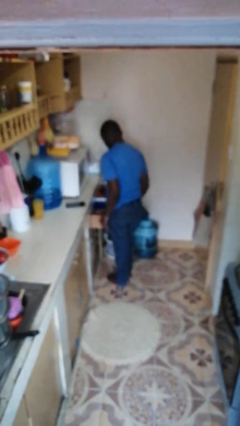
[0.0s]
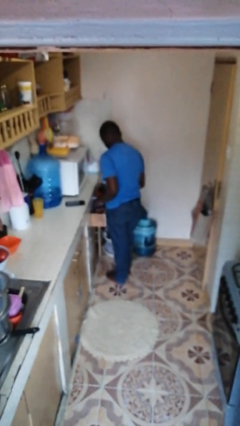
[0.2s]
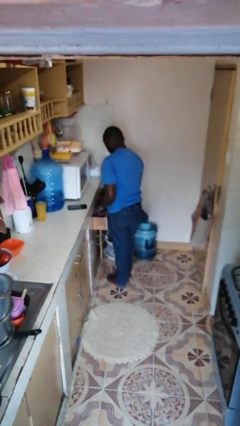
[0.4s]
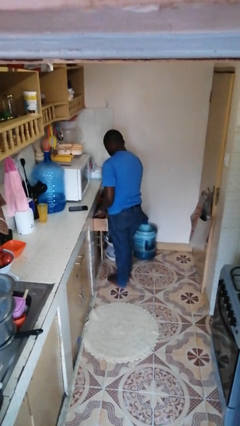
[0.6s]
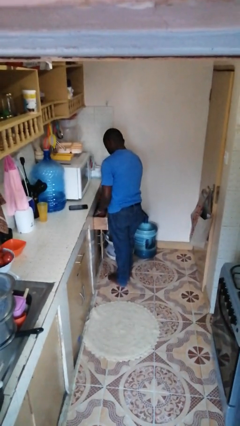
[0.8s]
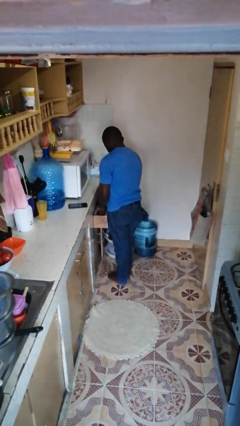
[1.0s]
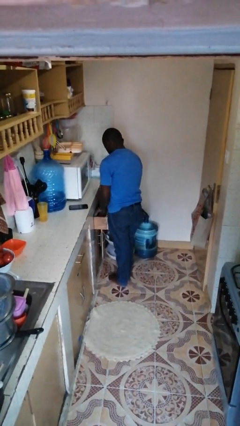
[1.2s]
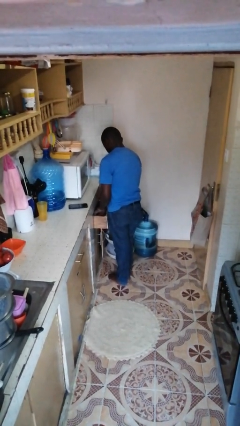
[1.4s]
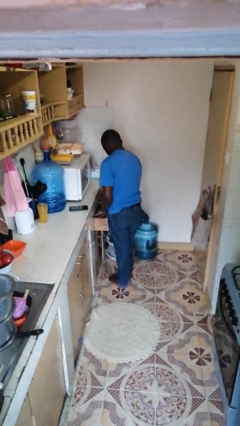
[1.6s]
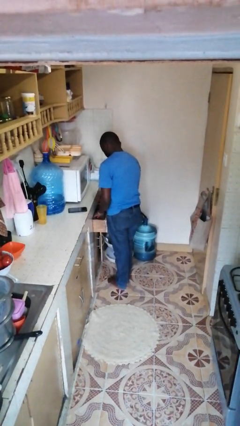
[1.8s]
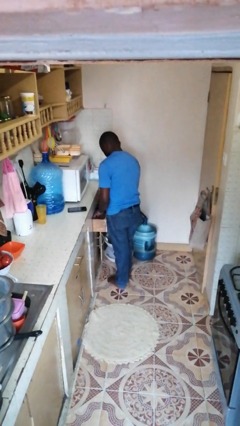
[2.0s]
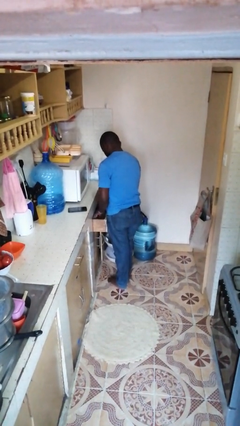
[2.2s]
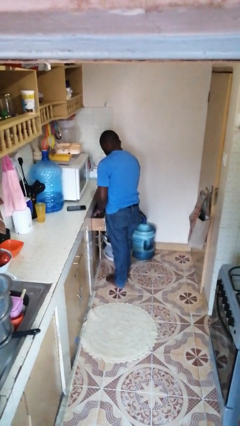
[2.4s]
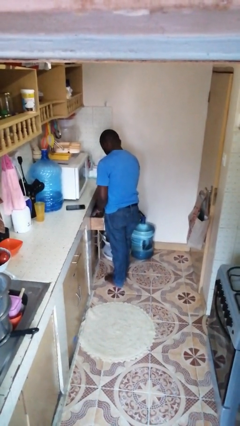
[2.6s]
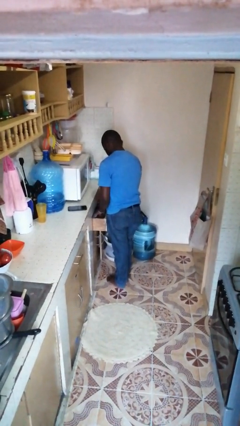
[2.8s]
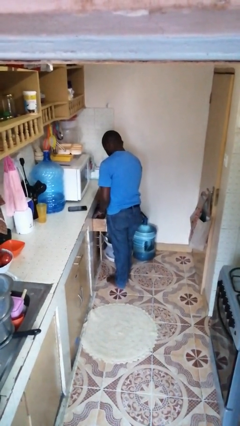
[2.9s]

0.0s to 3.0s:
person searches in kitchen drawer

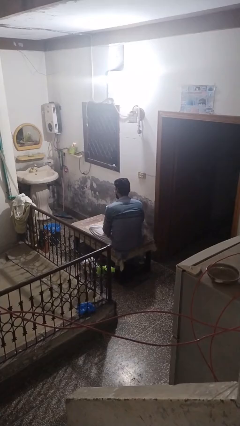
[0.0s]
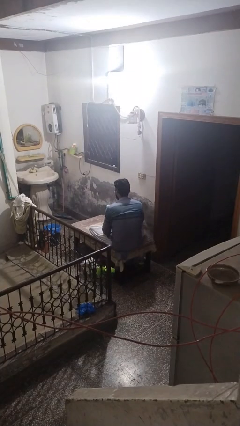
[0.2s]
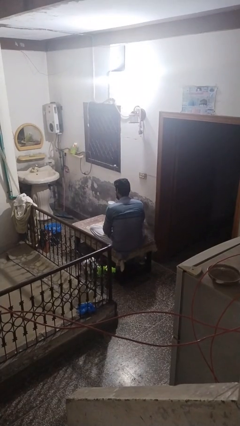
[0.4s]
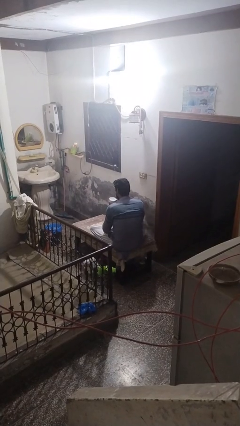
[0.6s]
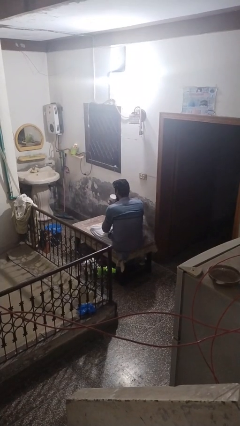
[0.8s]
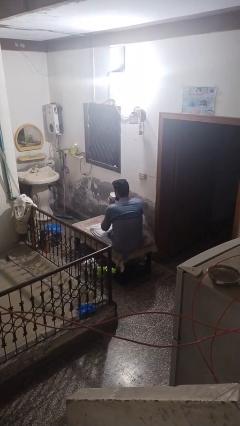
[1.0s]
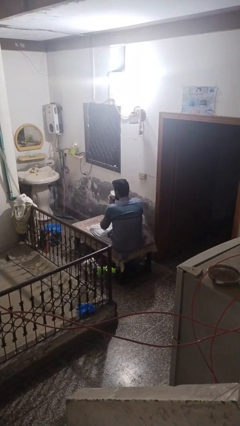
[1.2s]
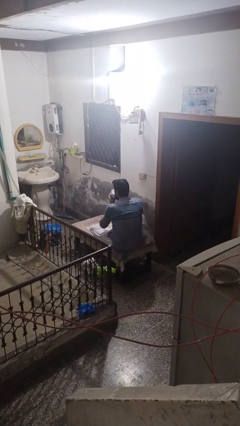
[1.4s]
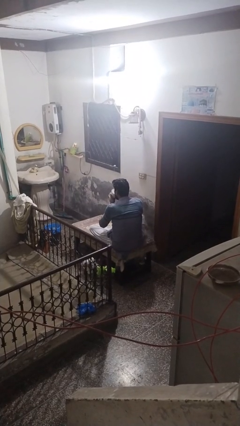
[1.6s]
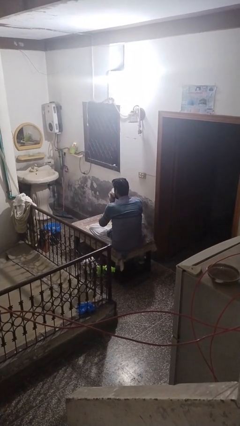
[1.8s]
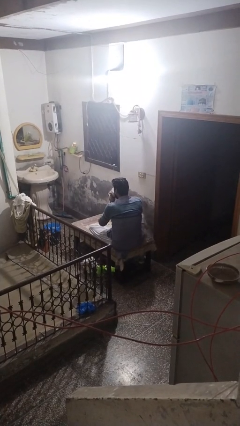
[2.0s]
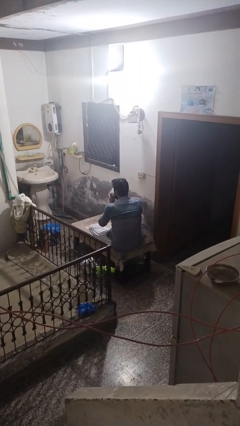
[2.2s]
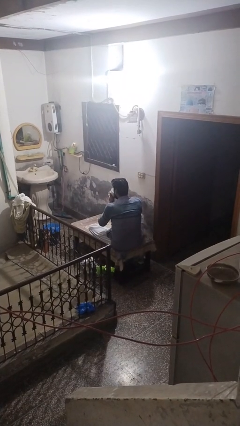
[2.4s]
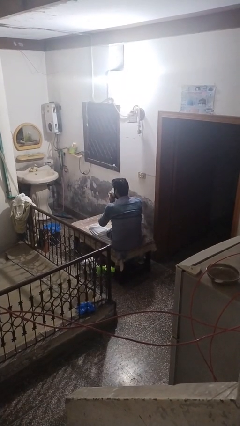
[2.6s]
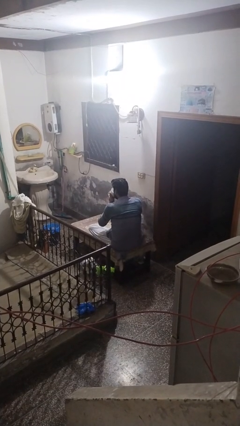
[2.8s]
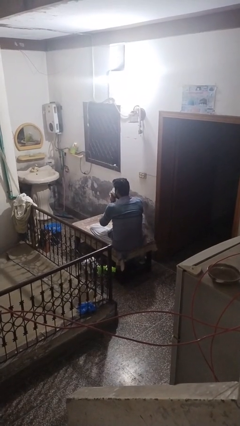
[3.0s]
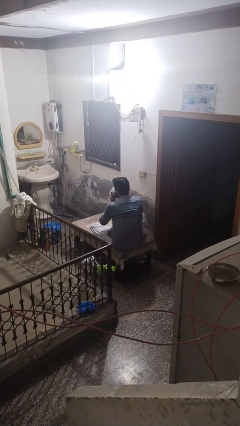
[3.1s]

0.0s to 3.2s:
person drinks from mug

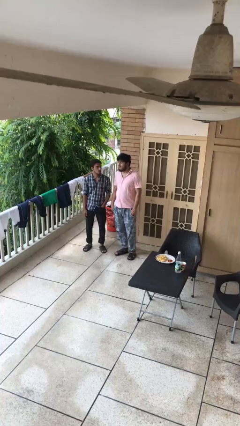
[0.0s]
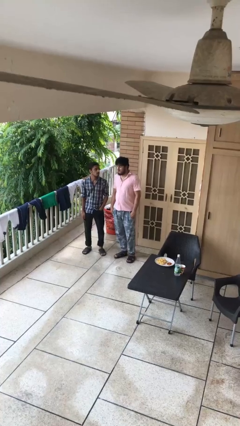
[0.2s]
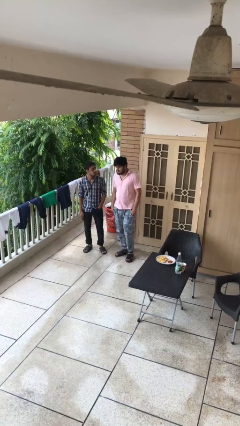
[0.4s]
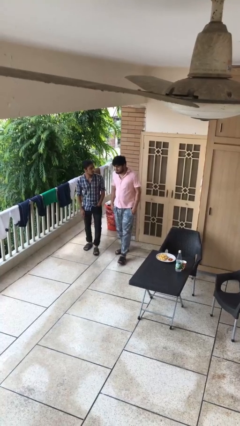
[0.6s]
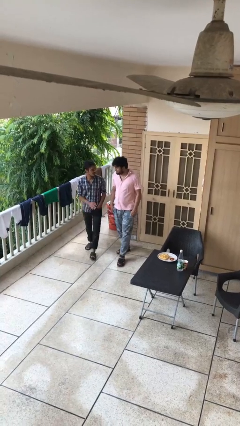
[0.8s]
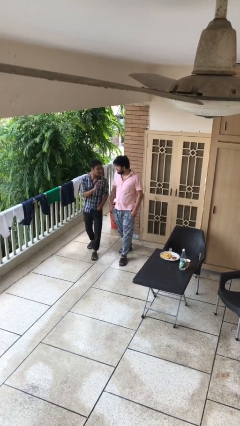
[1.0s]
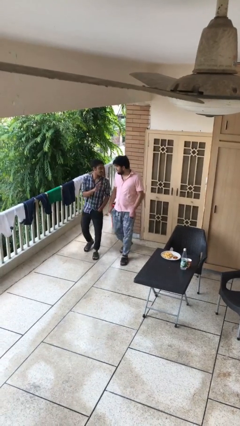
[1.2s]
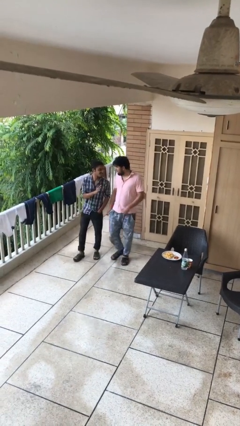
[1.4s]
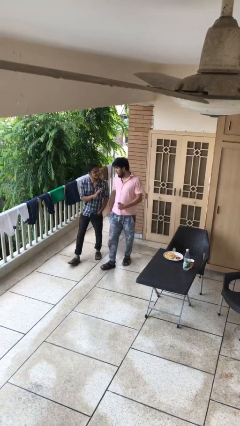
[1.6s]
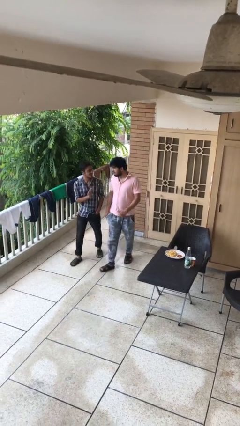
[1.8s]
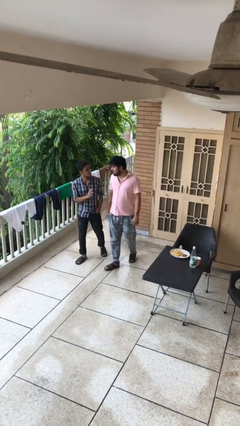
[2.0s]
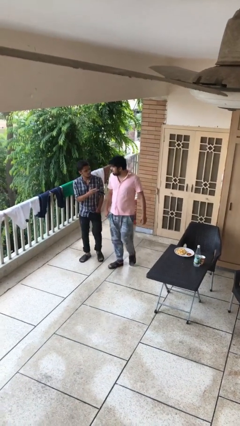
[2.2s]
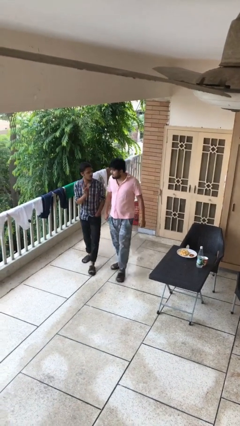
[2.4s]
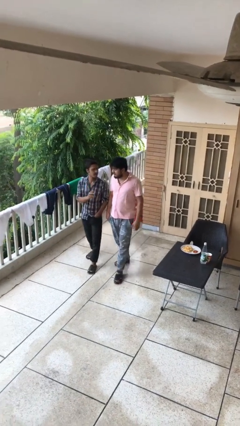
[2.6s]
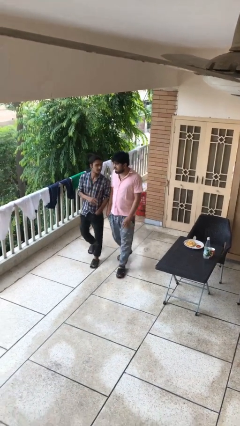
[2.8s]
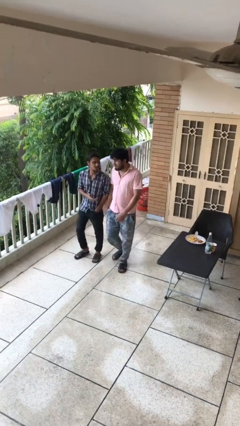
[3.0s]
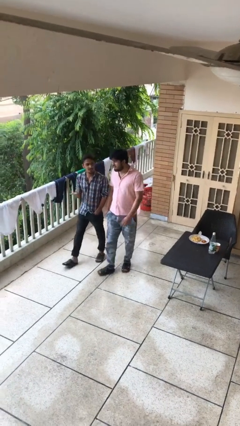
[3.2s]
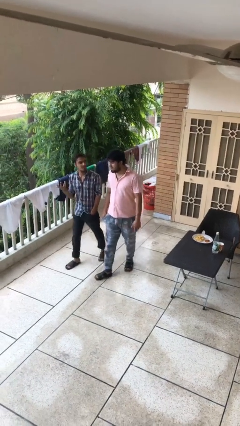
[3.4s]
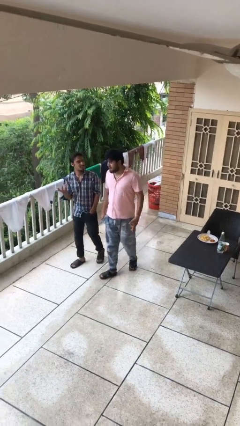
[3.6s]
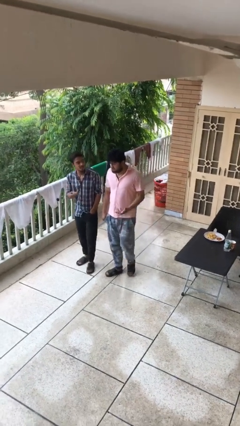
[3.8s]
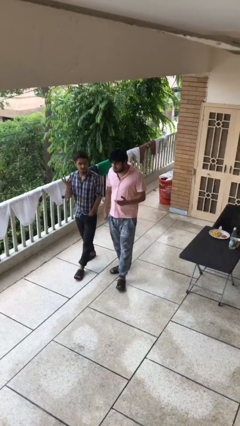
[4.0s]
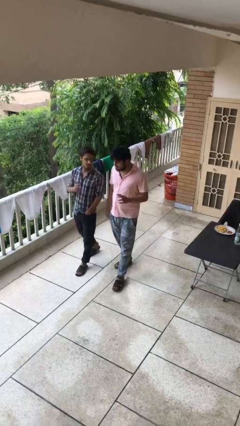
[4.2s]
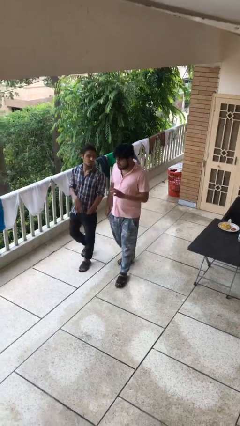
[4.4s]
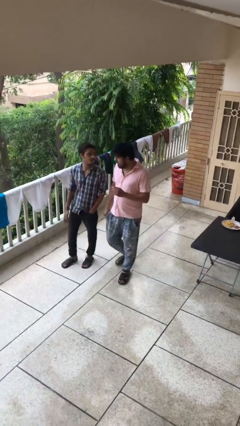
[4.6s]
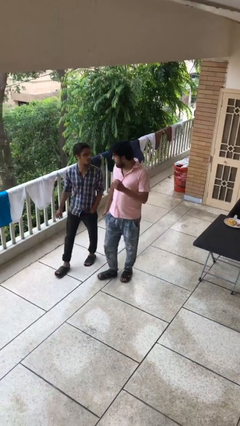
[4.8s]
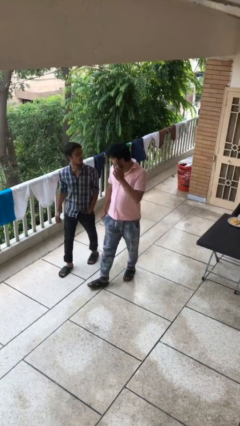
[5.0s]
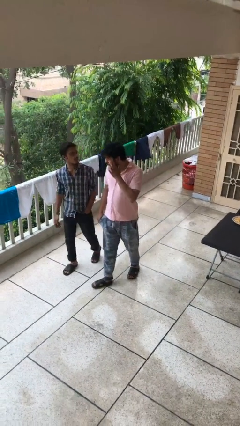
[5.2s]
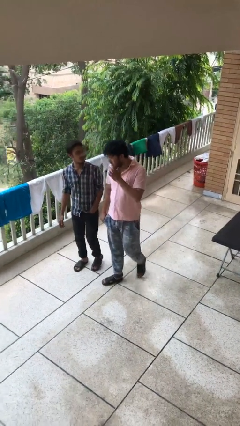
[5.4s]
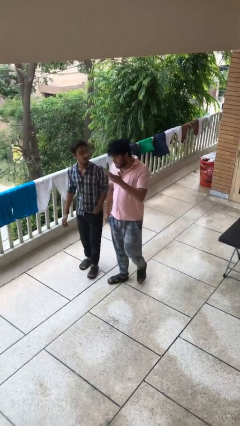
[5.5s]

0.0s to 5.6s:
person talks to person

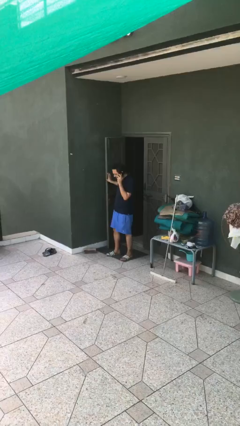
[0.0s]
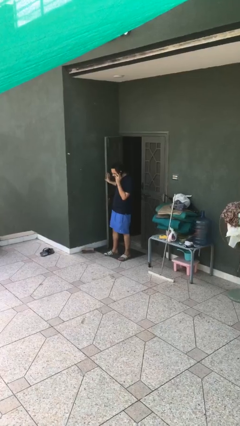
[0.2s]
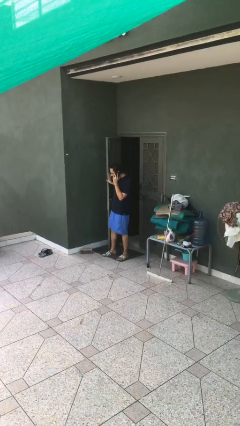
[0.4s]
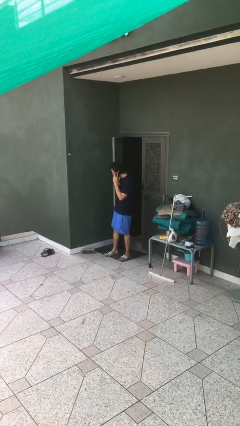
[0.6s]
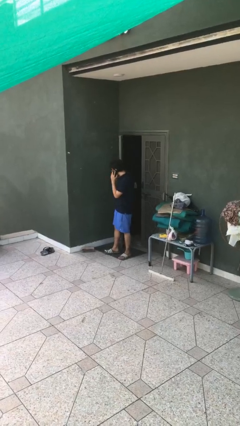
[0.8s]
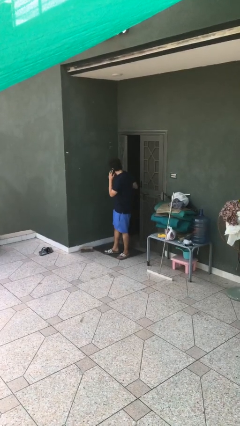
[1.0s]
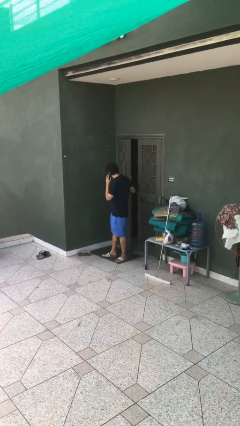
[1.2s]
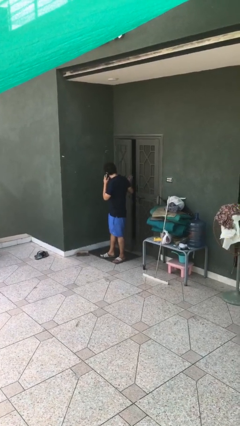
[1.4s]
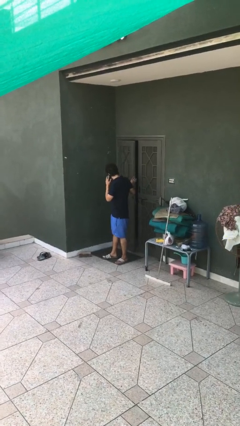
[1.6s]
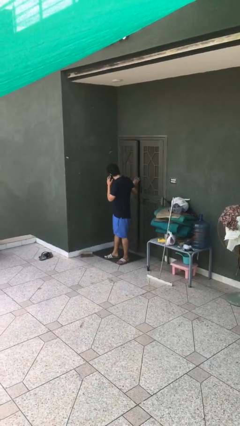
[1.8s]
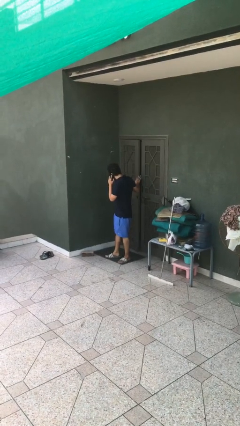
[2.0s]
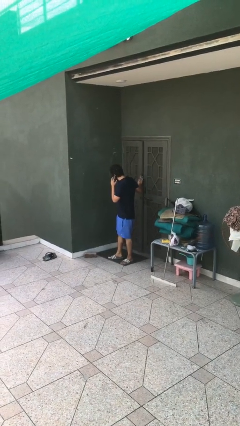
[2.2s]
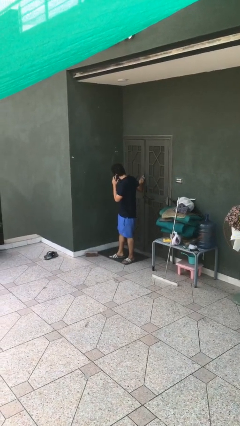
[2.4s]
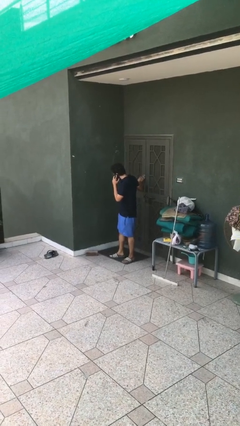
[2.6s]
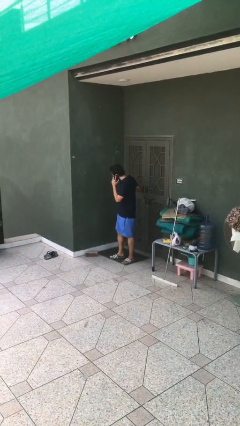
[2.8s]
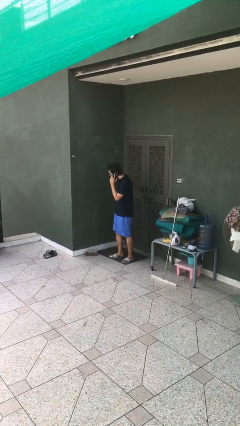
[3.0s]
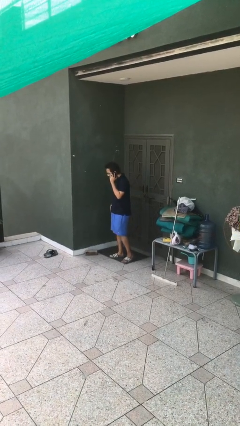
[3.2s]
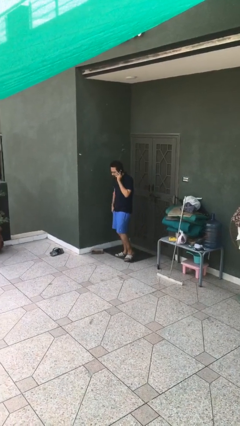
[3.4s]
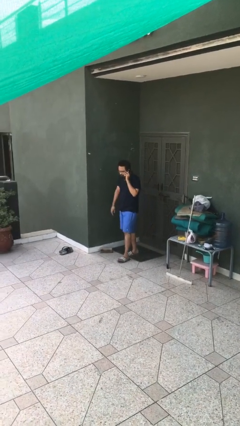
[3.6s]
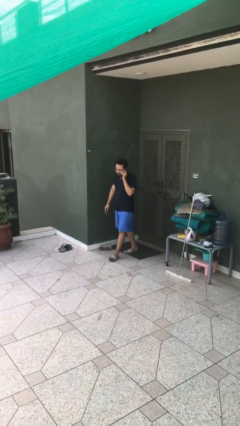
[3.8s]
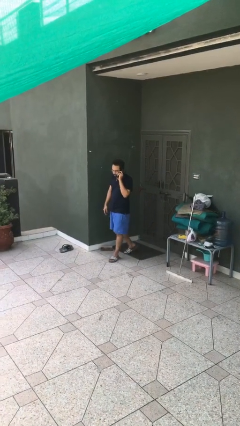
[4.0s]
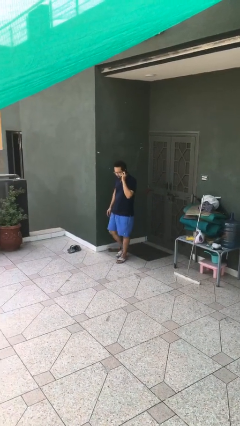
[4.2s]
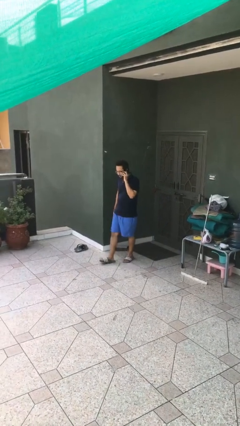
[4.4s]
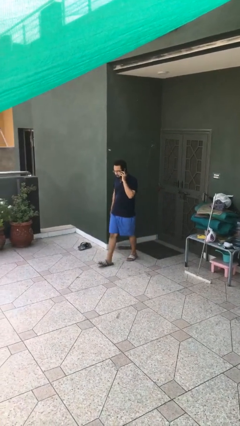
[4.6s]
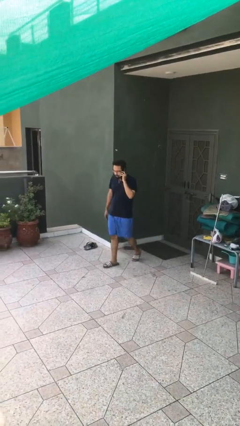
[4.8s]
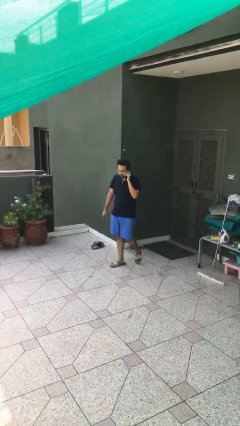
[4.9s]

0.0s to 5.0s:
person closes facility door

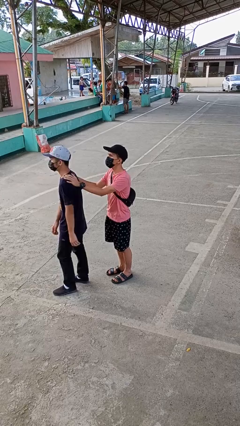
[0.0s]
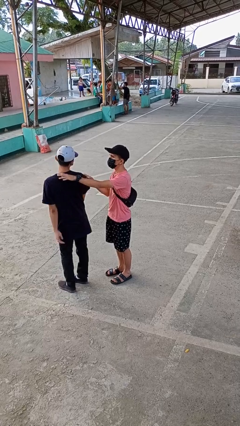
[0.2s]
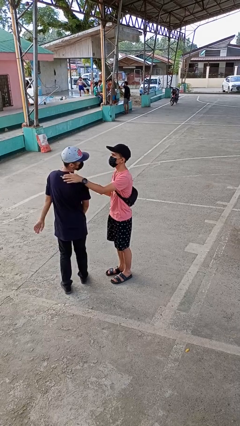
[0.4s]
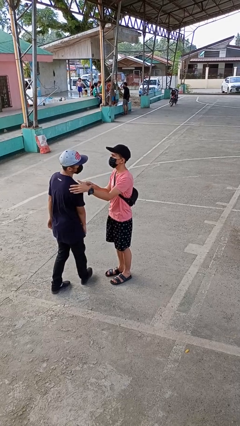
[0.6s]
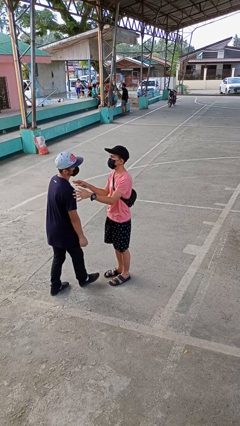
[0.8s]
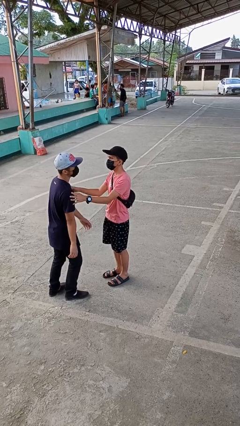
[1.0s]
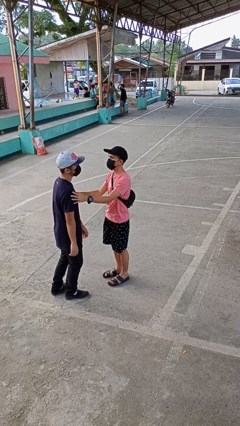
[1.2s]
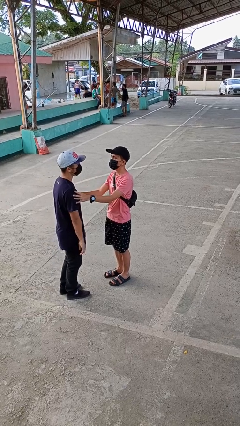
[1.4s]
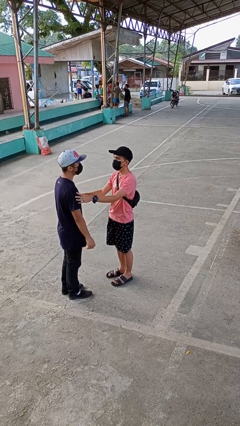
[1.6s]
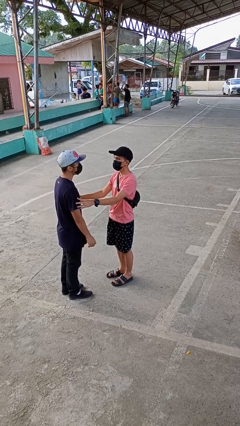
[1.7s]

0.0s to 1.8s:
person spins person around
